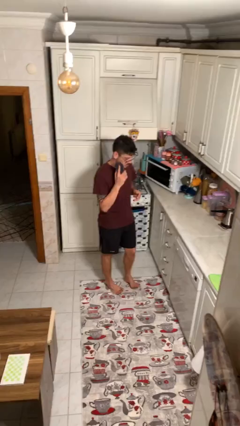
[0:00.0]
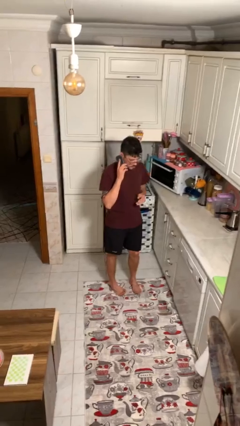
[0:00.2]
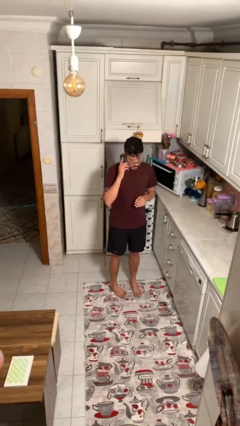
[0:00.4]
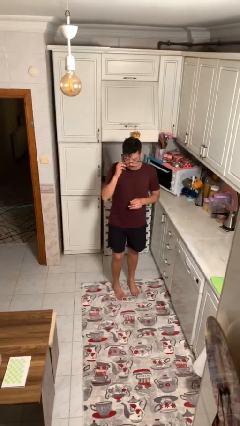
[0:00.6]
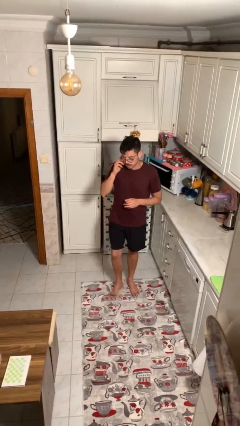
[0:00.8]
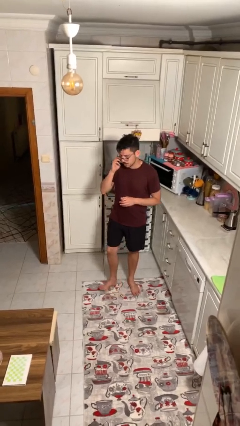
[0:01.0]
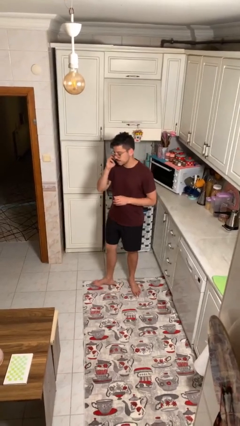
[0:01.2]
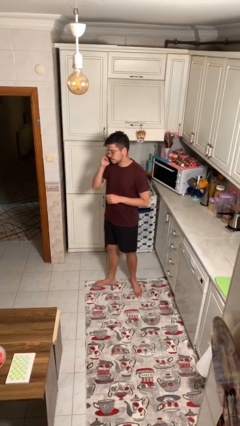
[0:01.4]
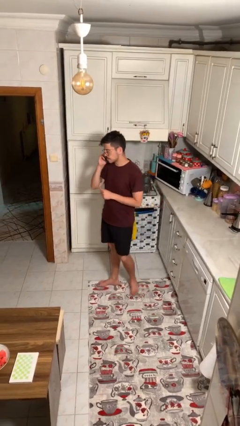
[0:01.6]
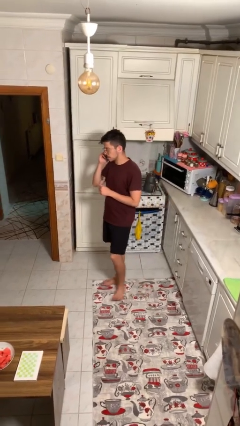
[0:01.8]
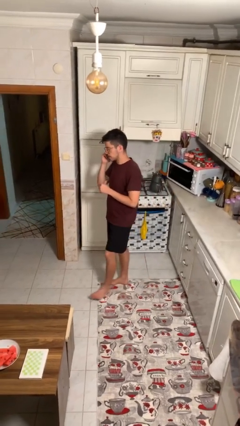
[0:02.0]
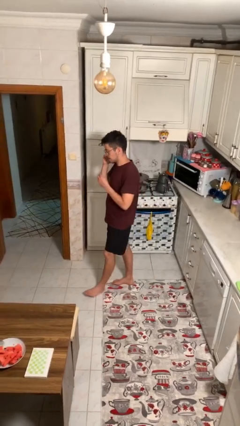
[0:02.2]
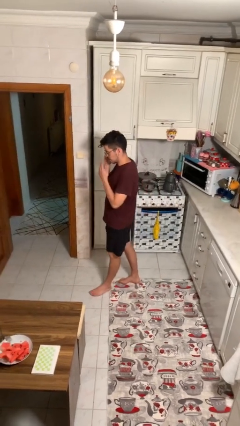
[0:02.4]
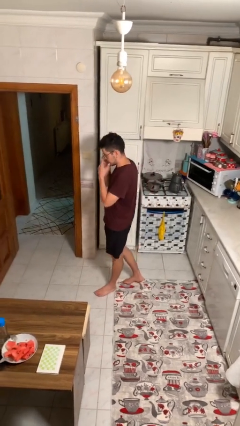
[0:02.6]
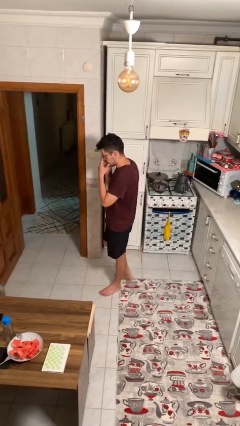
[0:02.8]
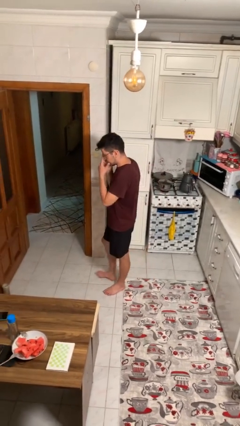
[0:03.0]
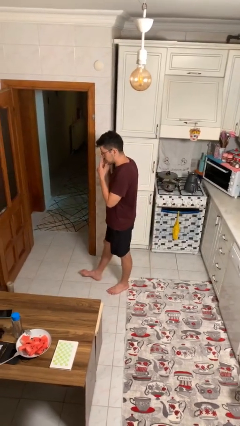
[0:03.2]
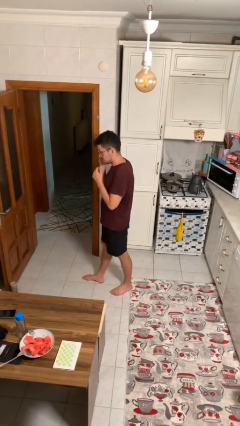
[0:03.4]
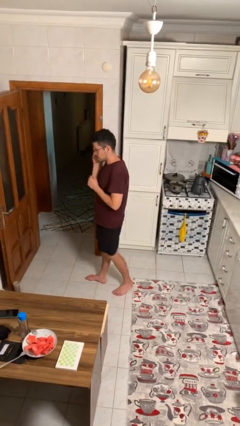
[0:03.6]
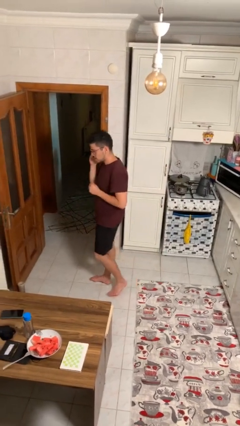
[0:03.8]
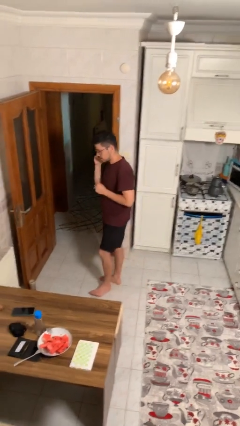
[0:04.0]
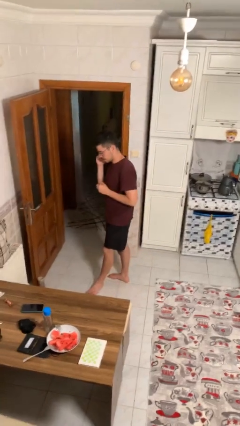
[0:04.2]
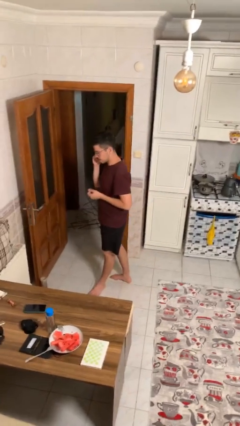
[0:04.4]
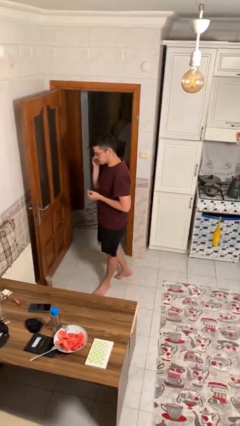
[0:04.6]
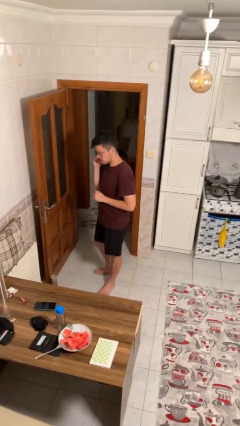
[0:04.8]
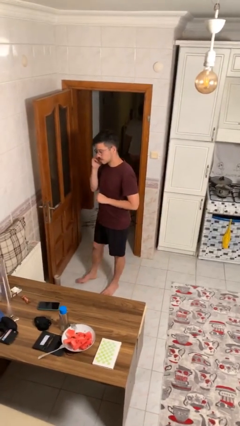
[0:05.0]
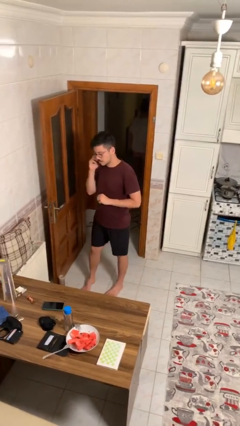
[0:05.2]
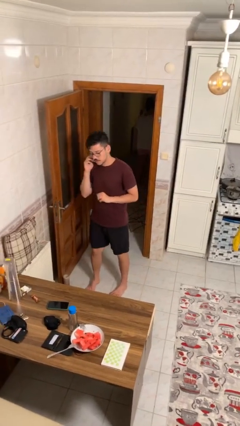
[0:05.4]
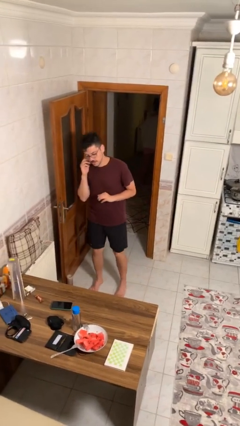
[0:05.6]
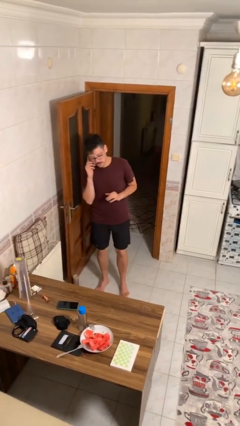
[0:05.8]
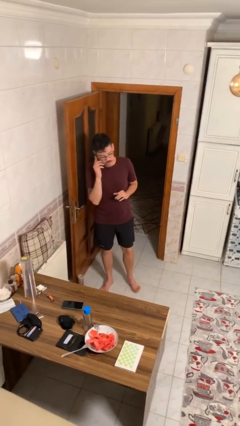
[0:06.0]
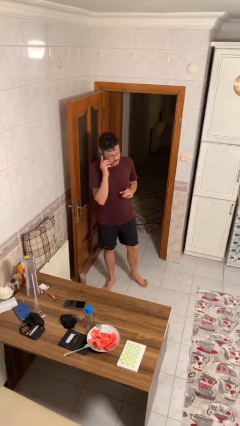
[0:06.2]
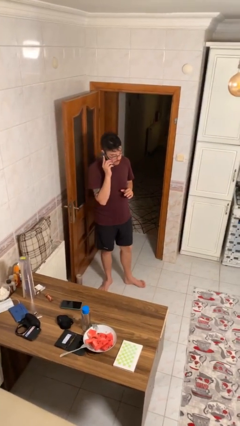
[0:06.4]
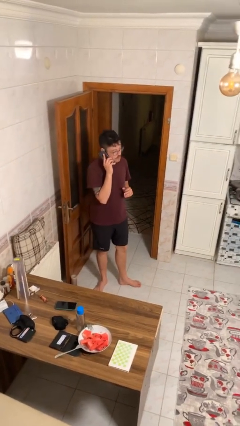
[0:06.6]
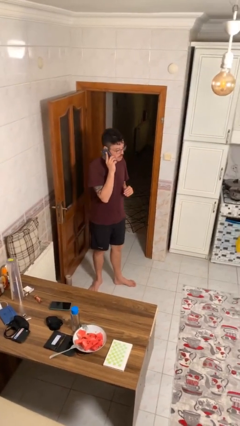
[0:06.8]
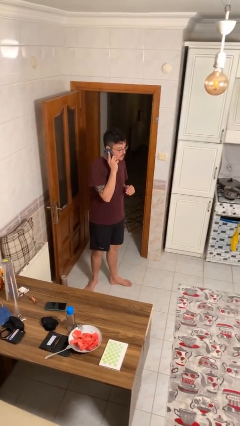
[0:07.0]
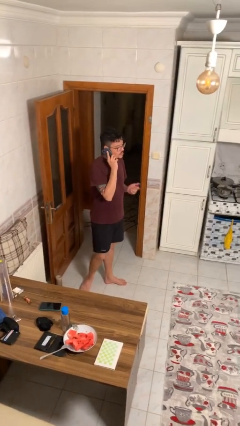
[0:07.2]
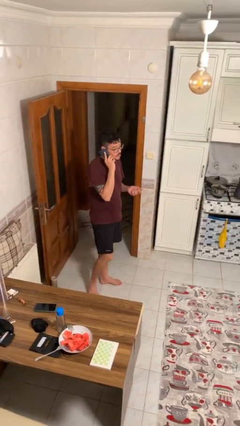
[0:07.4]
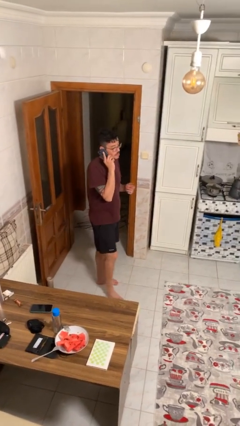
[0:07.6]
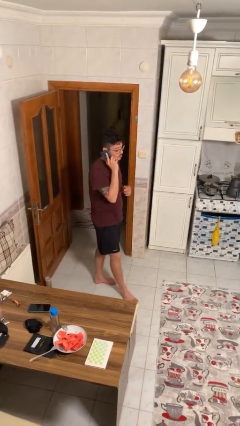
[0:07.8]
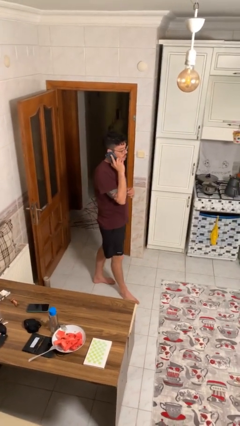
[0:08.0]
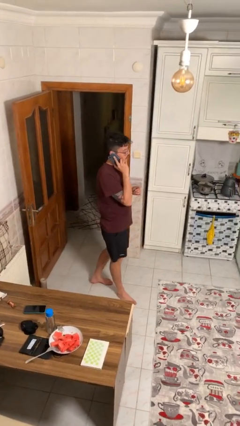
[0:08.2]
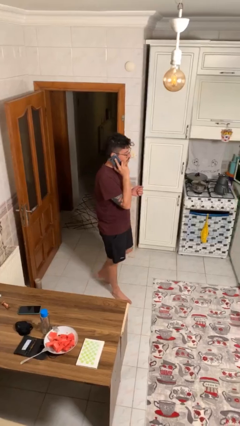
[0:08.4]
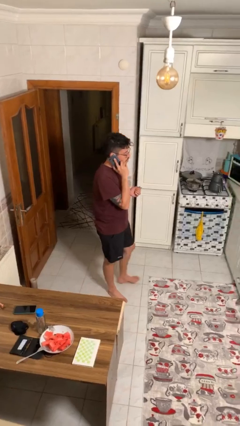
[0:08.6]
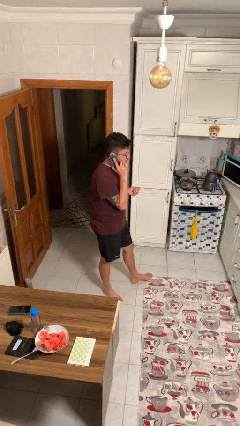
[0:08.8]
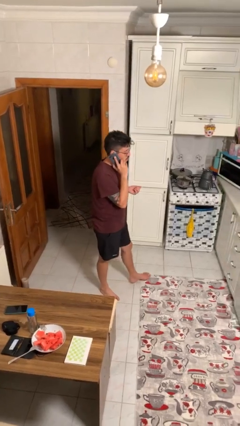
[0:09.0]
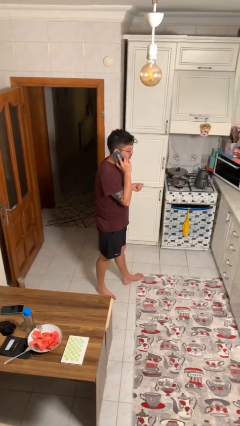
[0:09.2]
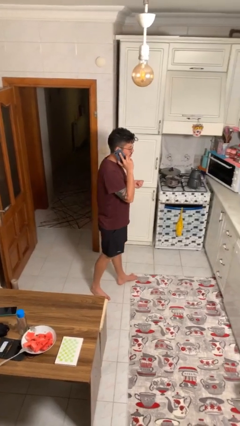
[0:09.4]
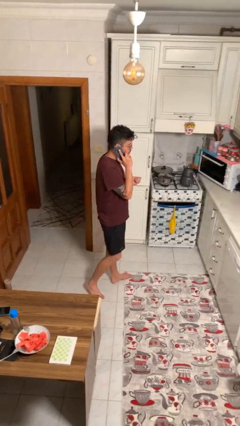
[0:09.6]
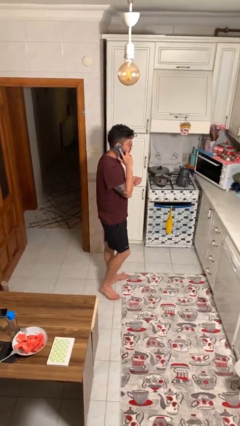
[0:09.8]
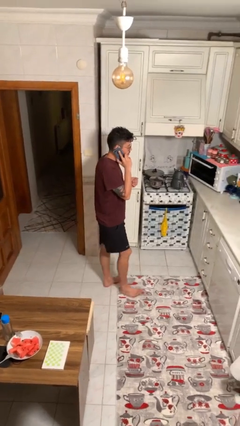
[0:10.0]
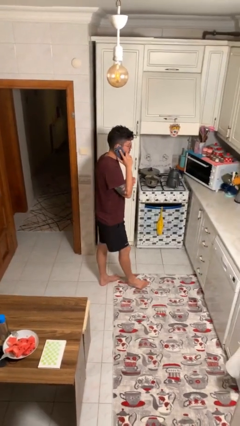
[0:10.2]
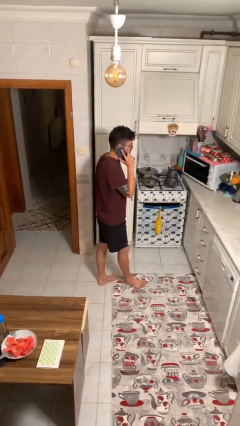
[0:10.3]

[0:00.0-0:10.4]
person talks on phone

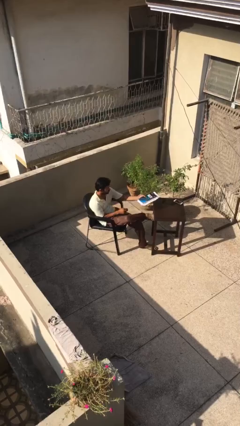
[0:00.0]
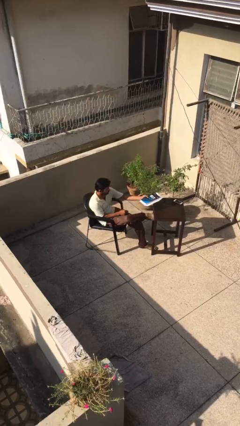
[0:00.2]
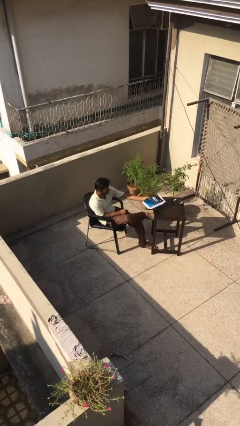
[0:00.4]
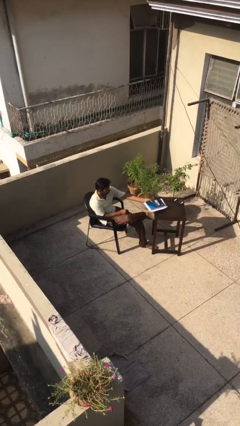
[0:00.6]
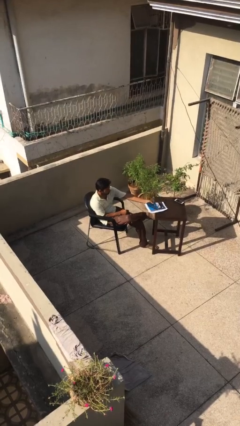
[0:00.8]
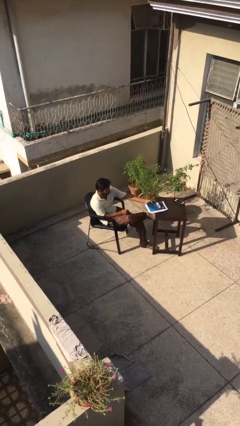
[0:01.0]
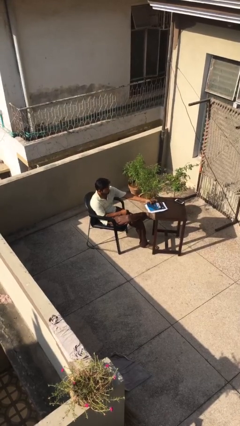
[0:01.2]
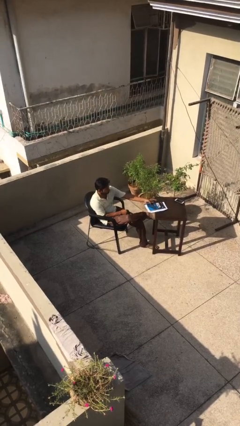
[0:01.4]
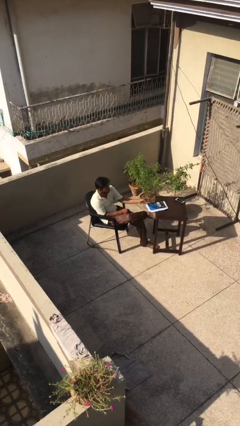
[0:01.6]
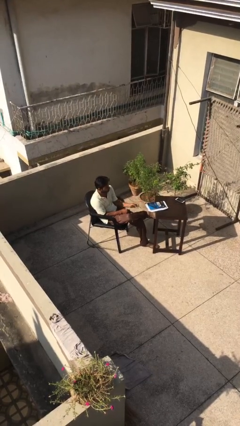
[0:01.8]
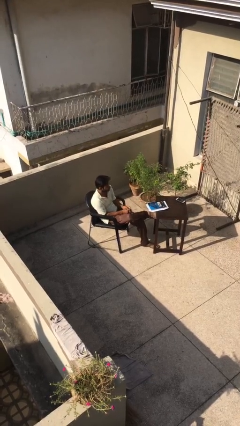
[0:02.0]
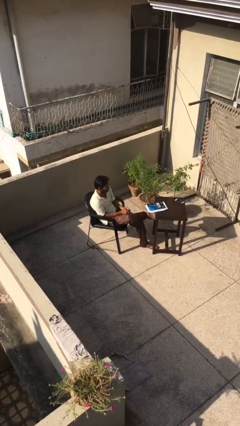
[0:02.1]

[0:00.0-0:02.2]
person puts down object on table

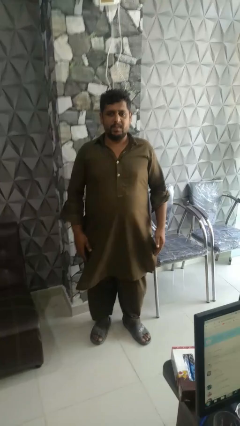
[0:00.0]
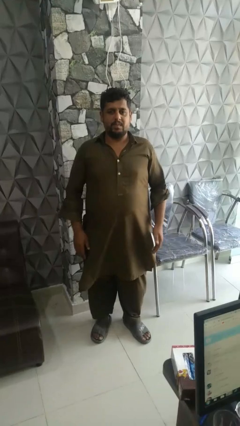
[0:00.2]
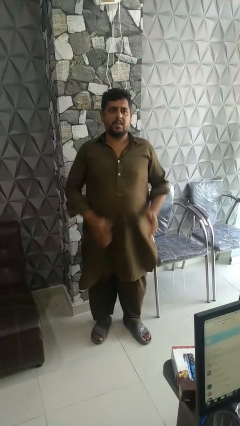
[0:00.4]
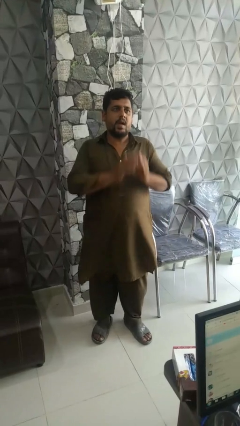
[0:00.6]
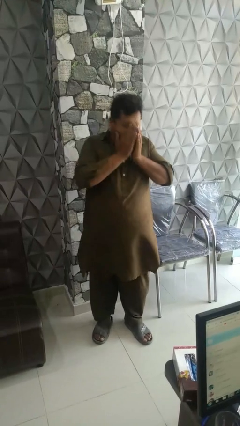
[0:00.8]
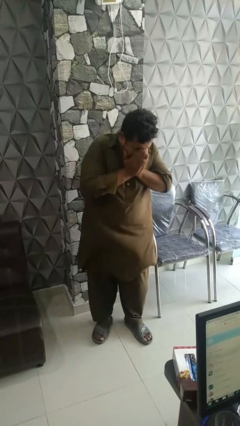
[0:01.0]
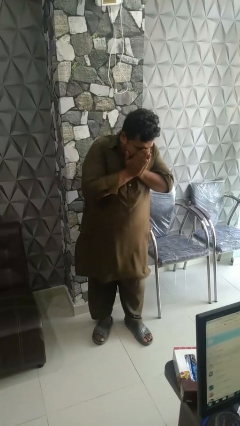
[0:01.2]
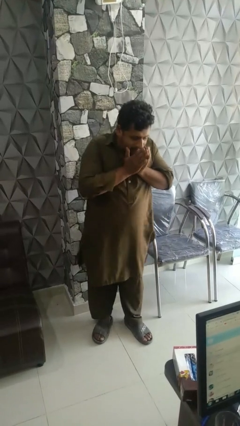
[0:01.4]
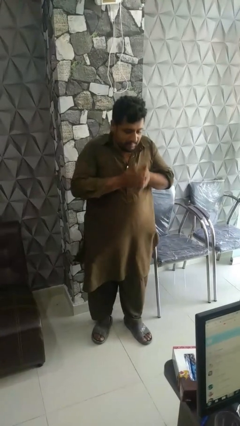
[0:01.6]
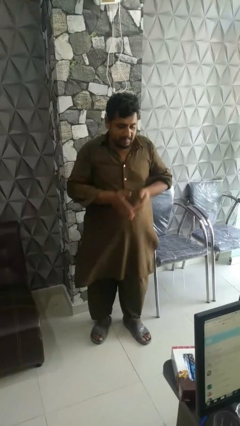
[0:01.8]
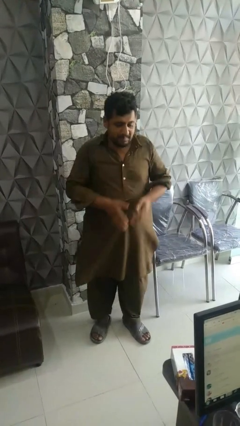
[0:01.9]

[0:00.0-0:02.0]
person sneezes into hand

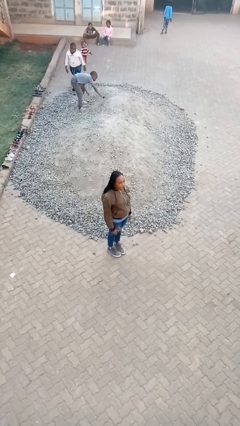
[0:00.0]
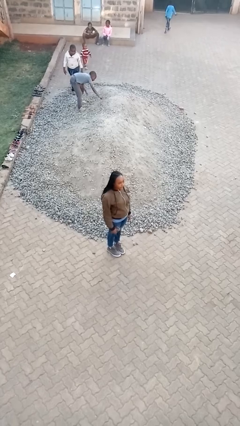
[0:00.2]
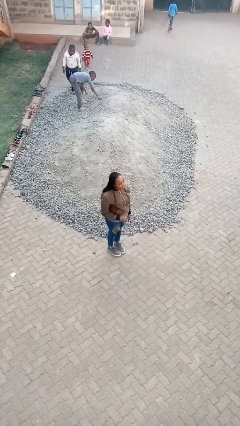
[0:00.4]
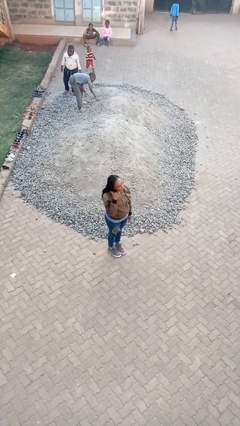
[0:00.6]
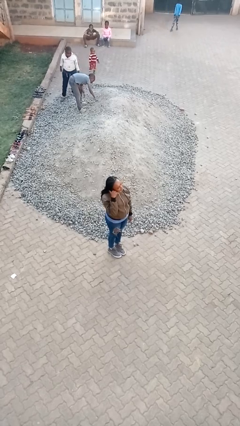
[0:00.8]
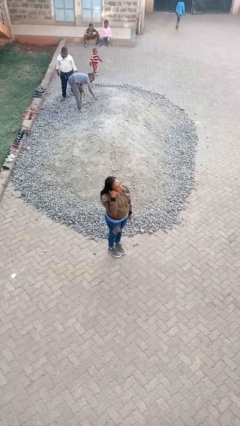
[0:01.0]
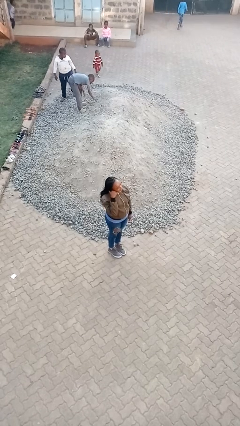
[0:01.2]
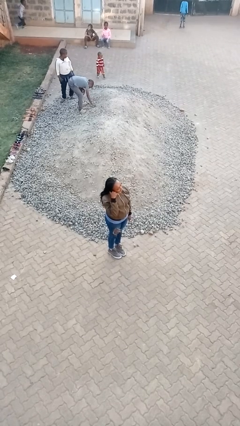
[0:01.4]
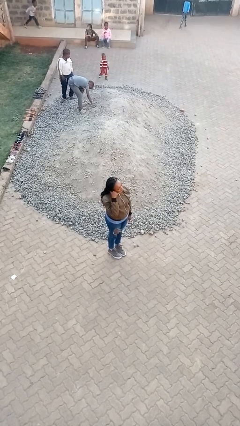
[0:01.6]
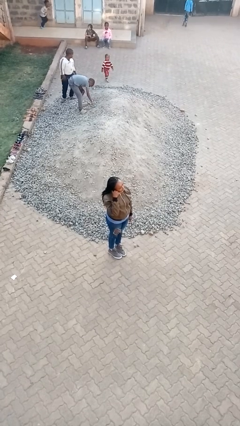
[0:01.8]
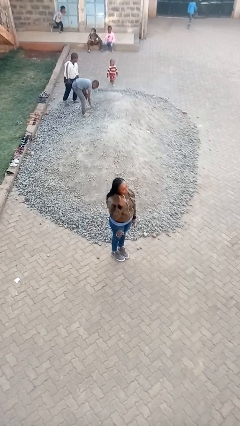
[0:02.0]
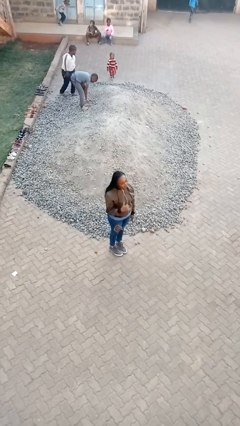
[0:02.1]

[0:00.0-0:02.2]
person gestures call me

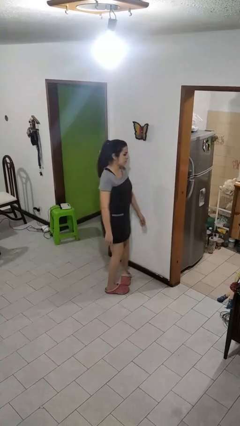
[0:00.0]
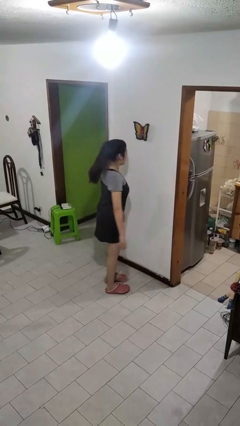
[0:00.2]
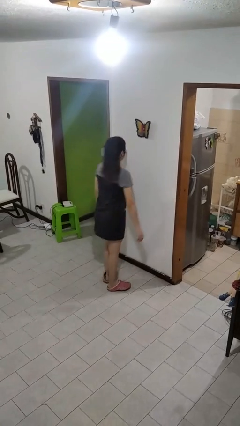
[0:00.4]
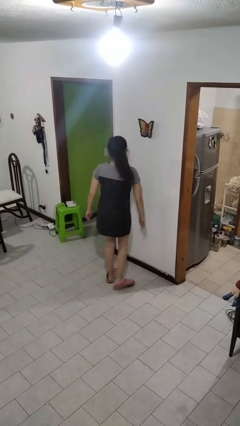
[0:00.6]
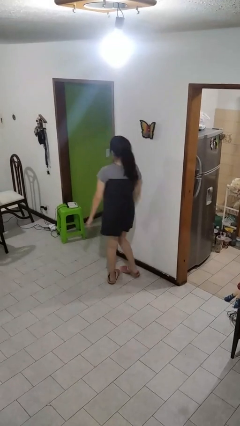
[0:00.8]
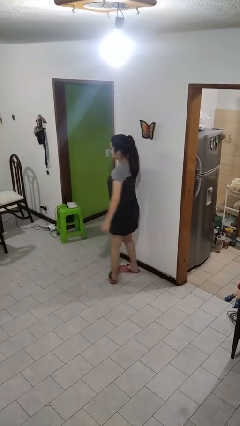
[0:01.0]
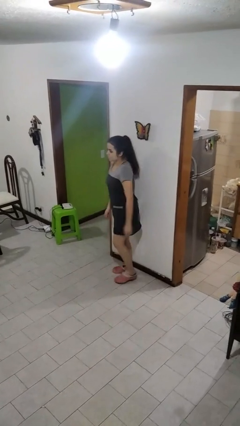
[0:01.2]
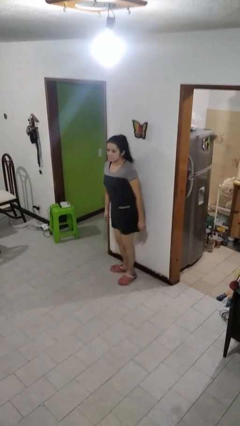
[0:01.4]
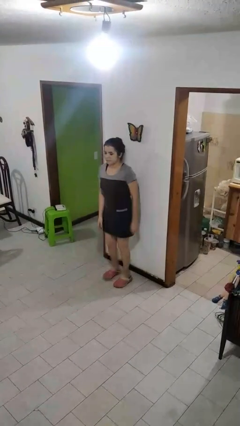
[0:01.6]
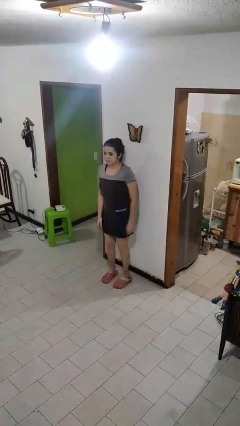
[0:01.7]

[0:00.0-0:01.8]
person twirls
